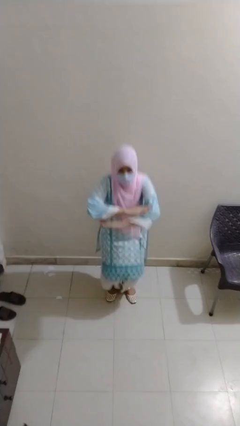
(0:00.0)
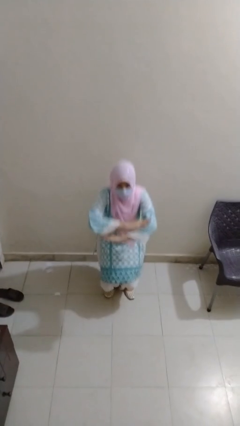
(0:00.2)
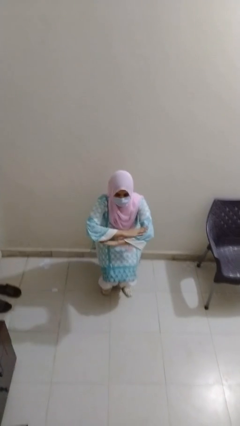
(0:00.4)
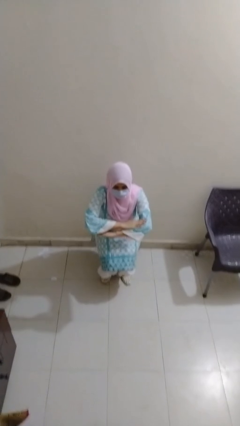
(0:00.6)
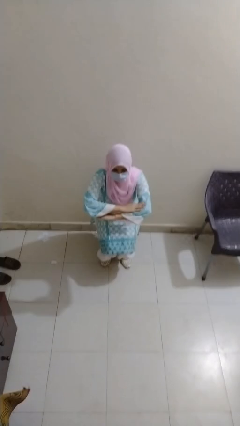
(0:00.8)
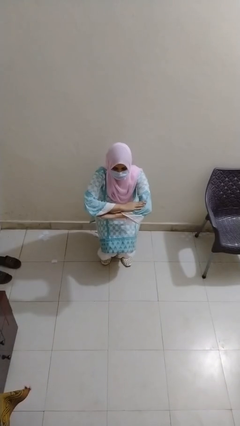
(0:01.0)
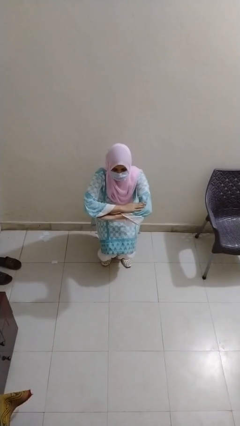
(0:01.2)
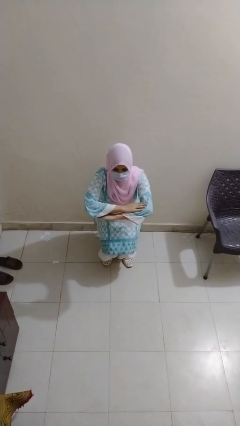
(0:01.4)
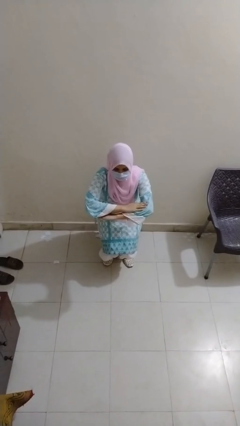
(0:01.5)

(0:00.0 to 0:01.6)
person squats

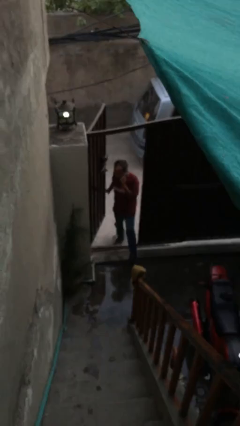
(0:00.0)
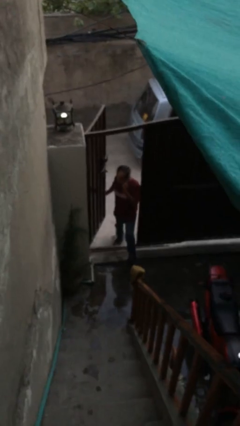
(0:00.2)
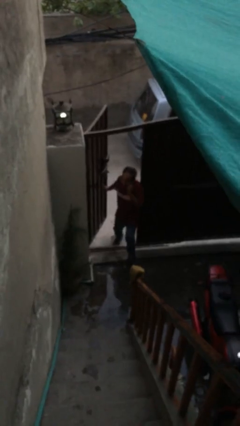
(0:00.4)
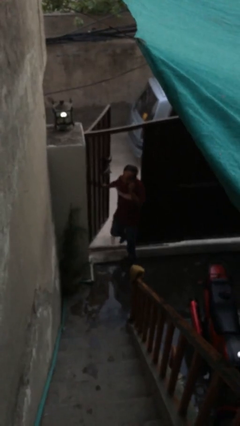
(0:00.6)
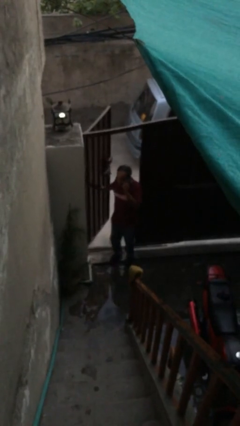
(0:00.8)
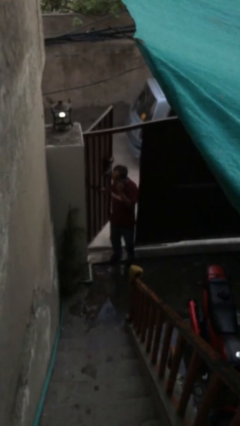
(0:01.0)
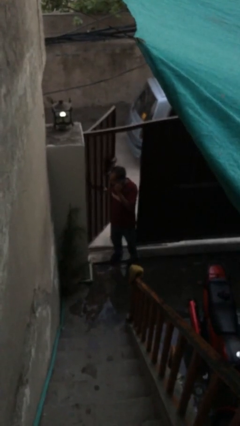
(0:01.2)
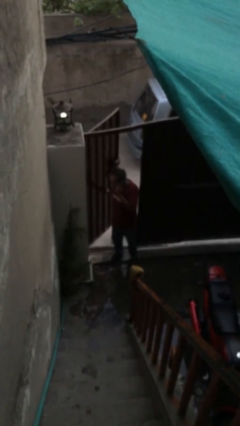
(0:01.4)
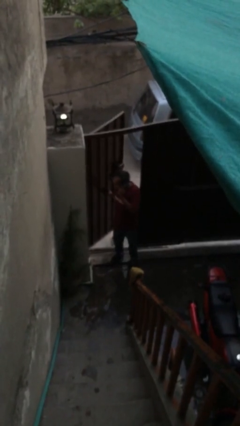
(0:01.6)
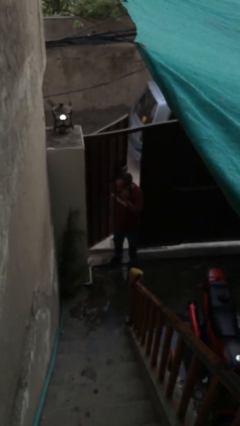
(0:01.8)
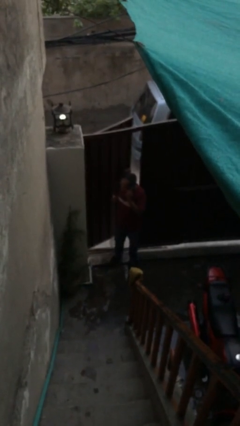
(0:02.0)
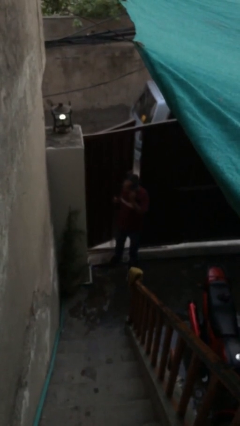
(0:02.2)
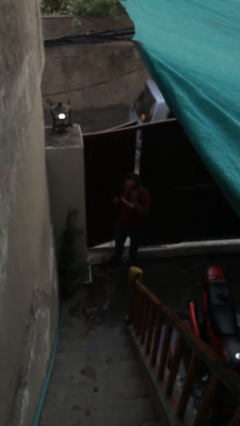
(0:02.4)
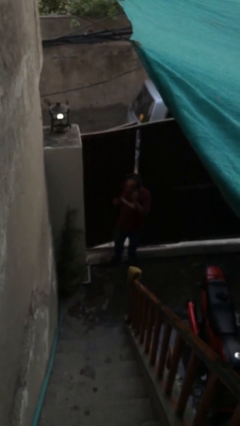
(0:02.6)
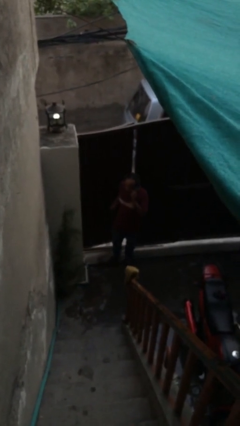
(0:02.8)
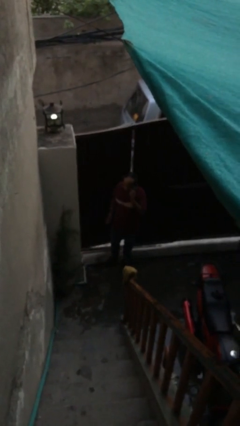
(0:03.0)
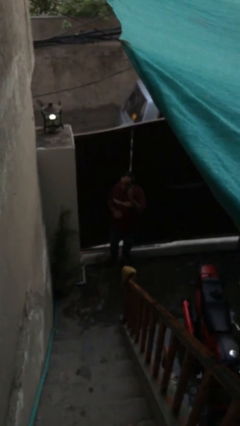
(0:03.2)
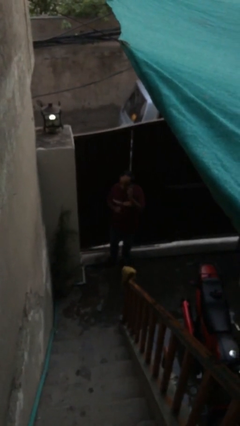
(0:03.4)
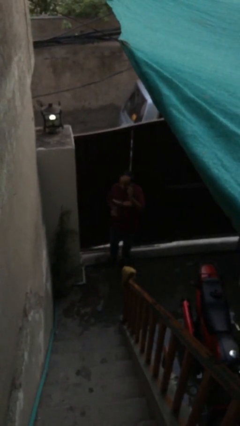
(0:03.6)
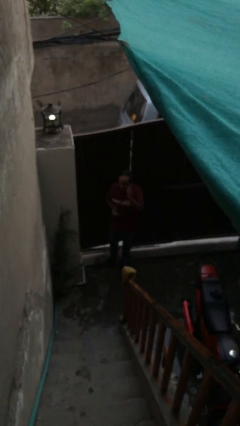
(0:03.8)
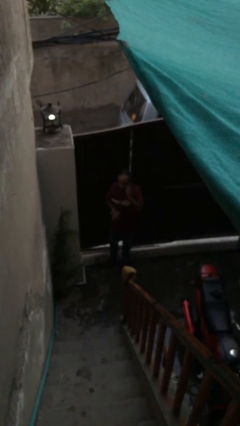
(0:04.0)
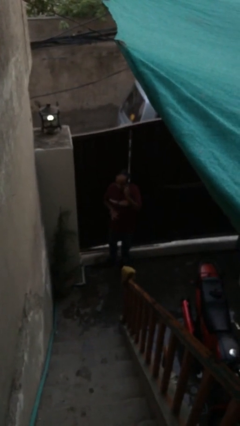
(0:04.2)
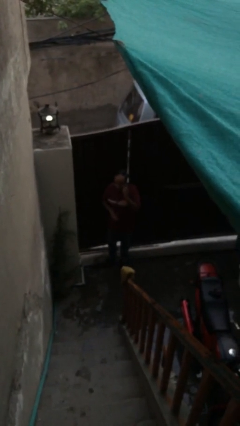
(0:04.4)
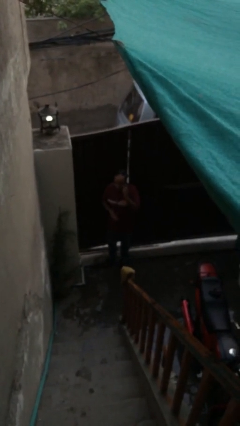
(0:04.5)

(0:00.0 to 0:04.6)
person closes facility door

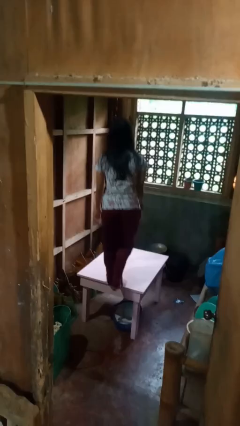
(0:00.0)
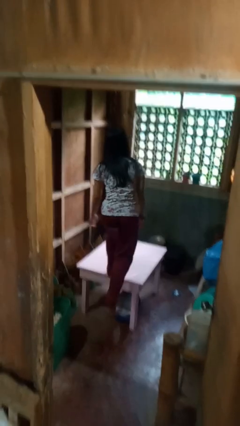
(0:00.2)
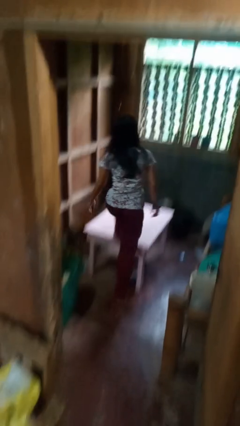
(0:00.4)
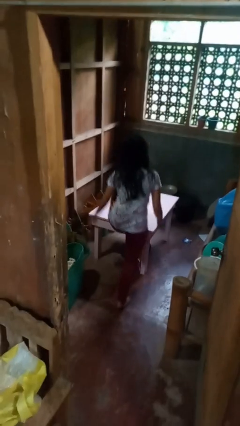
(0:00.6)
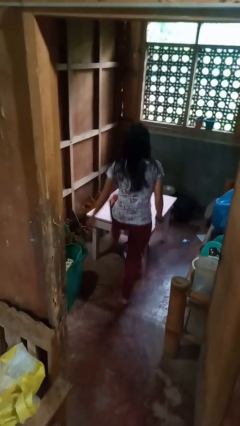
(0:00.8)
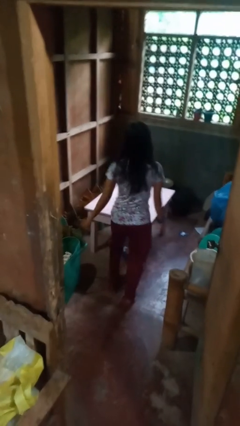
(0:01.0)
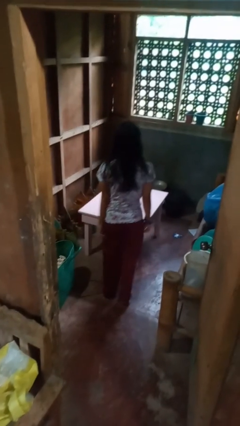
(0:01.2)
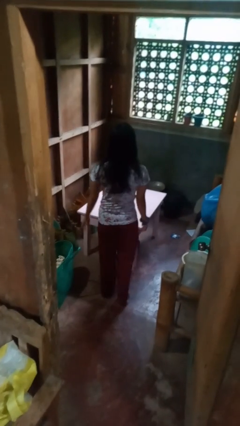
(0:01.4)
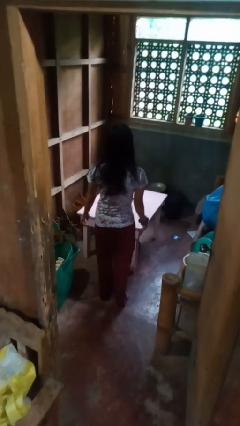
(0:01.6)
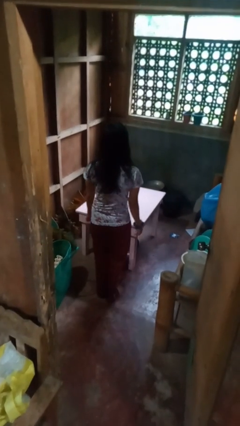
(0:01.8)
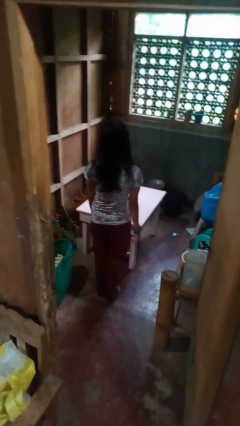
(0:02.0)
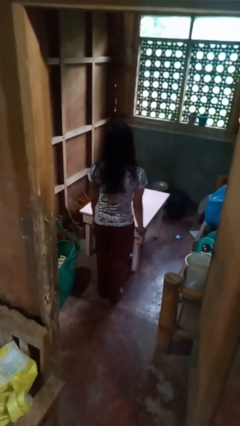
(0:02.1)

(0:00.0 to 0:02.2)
person climbs off table

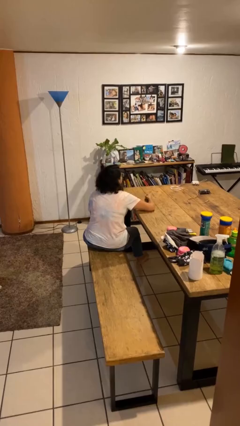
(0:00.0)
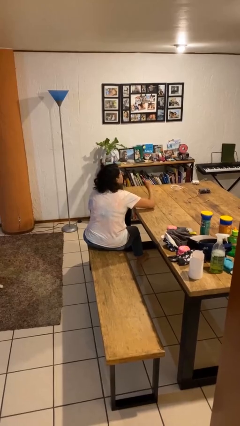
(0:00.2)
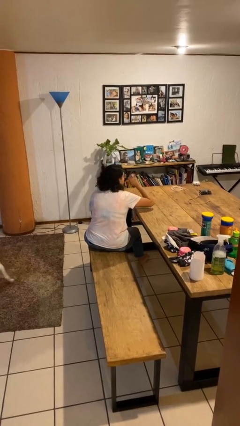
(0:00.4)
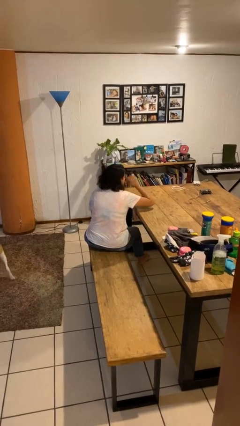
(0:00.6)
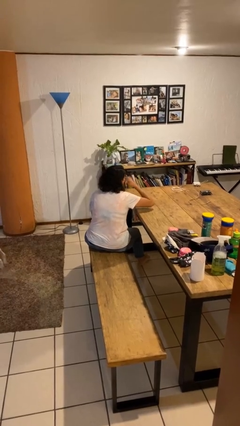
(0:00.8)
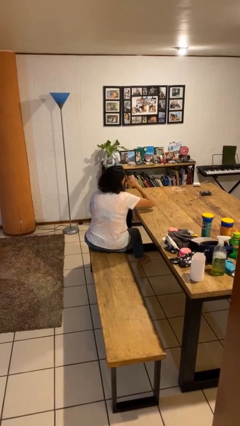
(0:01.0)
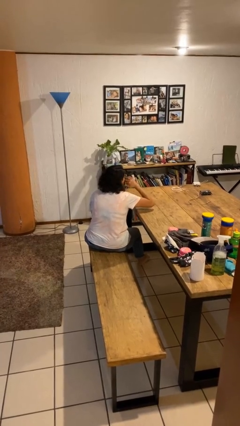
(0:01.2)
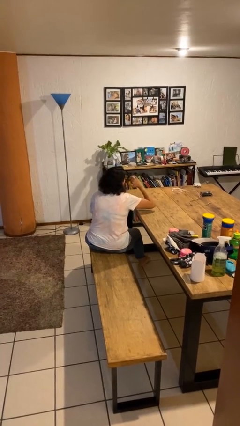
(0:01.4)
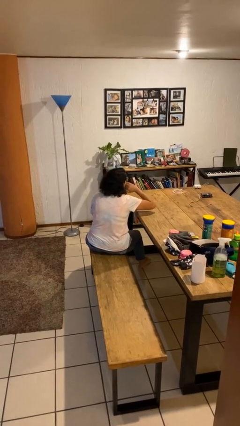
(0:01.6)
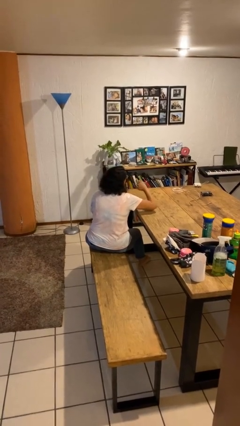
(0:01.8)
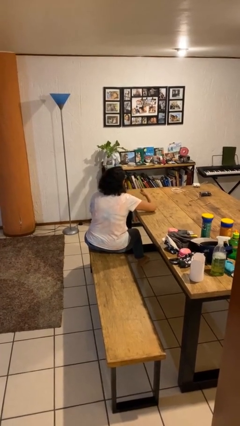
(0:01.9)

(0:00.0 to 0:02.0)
person licks fingers

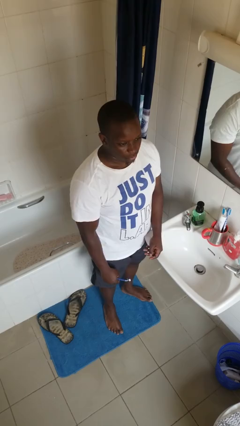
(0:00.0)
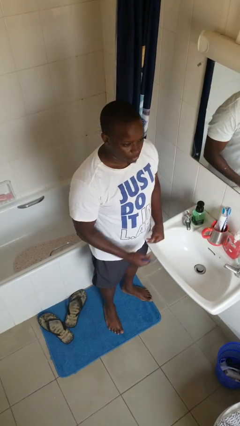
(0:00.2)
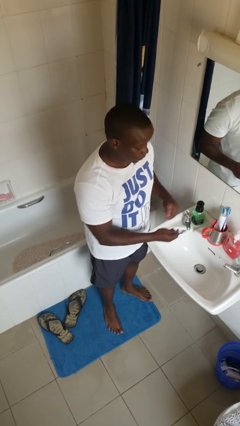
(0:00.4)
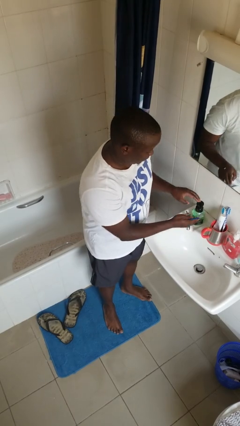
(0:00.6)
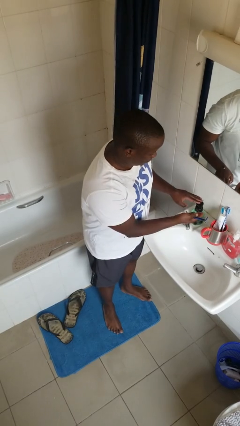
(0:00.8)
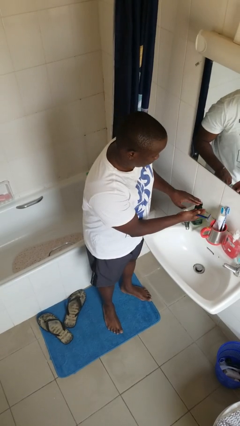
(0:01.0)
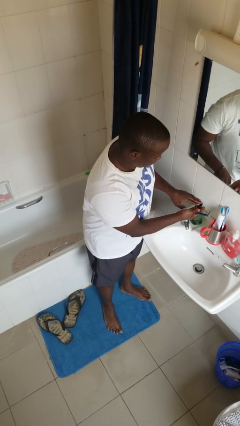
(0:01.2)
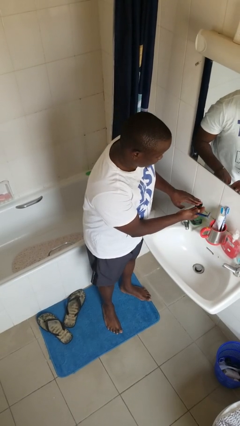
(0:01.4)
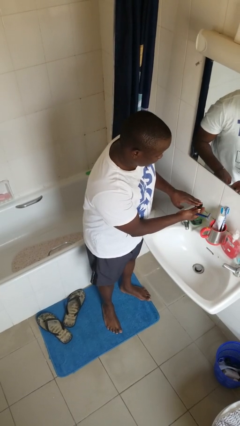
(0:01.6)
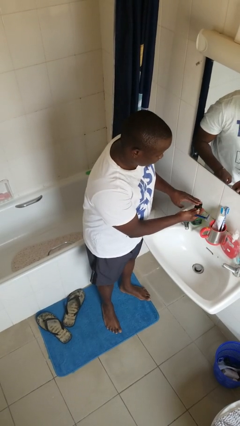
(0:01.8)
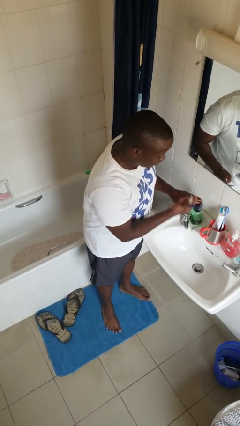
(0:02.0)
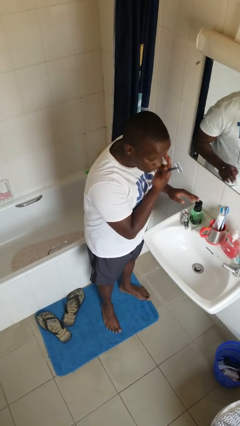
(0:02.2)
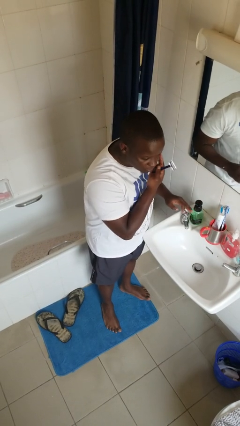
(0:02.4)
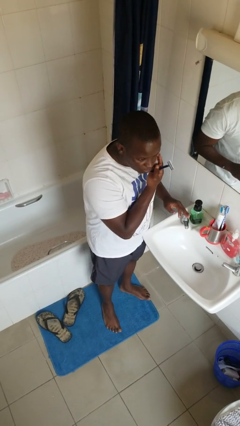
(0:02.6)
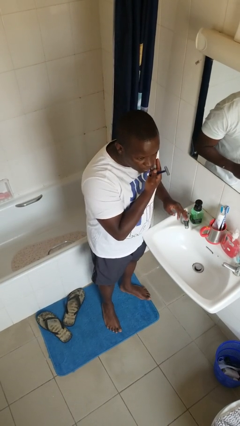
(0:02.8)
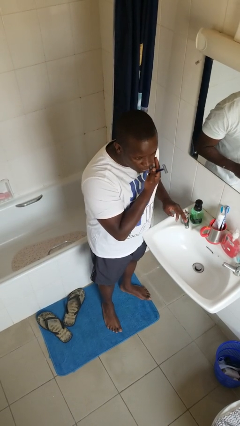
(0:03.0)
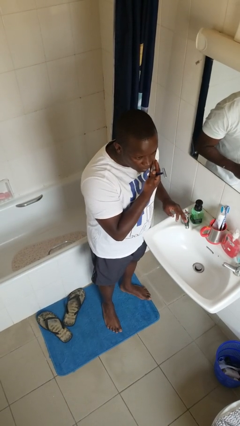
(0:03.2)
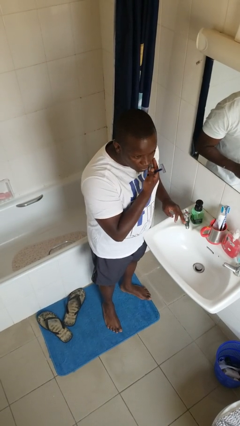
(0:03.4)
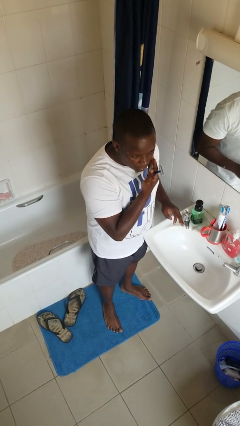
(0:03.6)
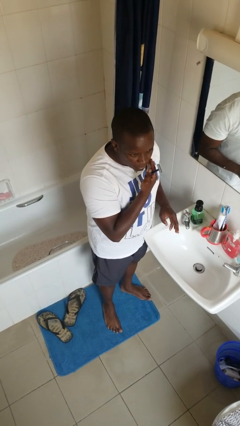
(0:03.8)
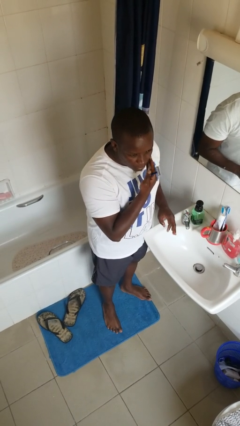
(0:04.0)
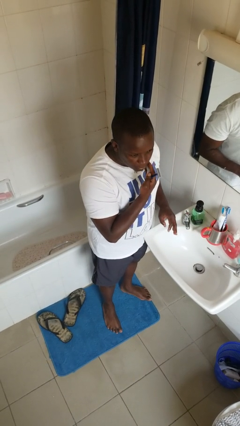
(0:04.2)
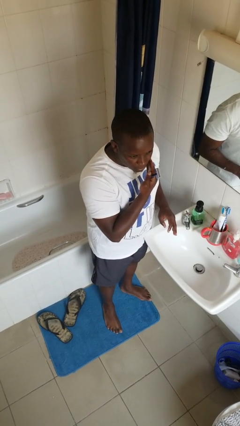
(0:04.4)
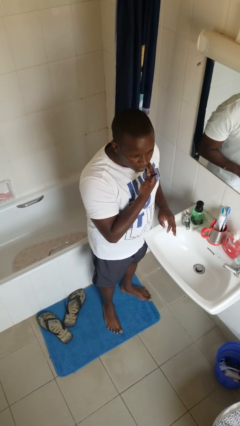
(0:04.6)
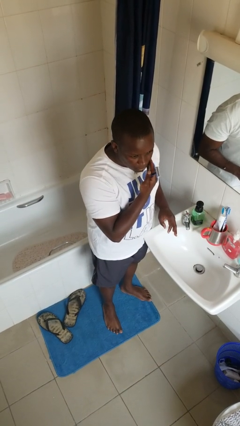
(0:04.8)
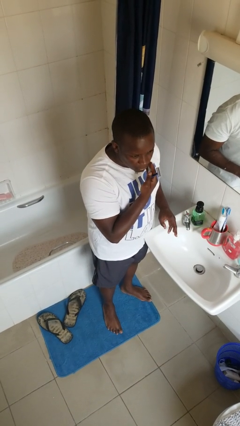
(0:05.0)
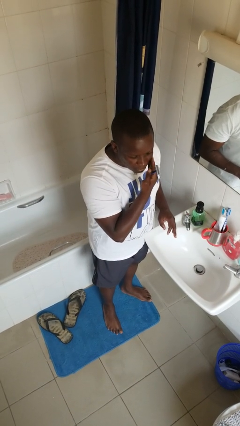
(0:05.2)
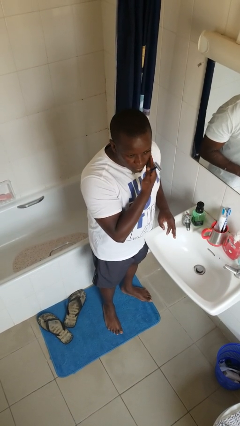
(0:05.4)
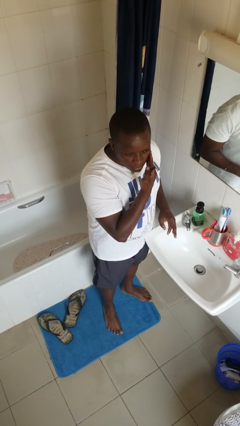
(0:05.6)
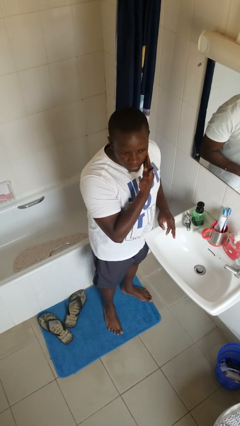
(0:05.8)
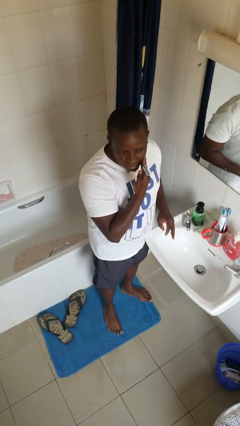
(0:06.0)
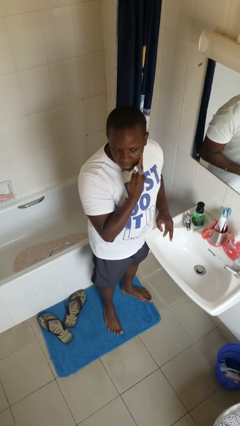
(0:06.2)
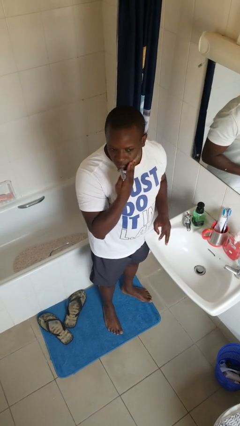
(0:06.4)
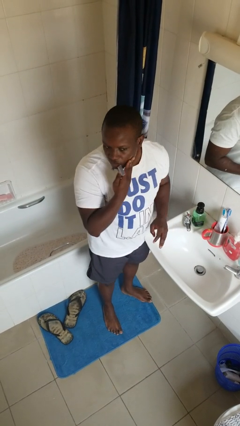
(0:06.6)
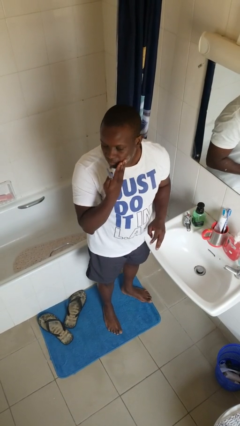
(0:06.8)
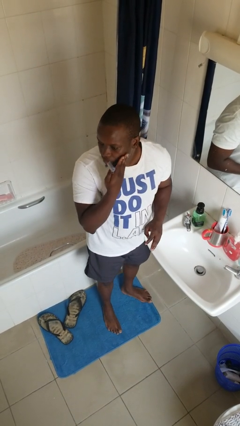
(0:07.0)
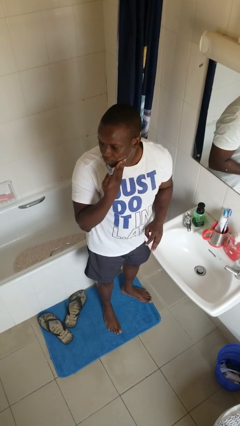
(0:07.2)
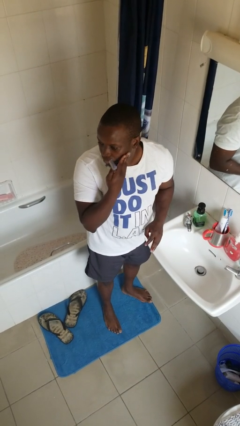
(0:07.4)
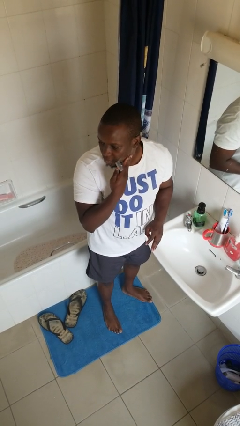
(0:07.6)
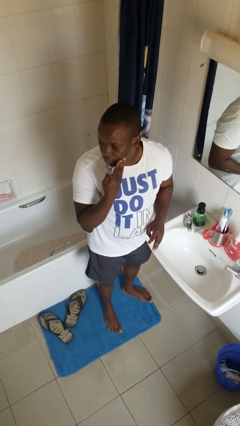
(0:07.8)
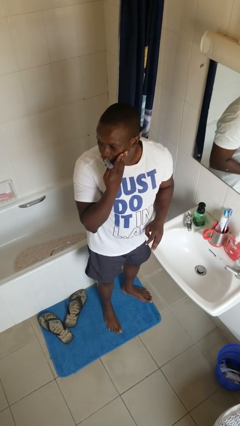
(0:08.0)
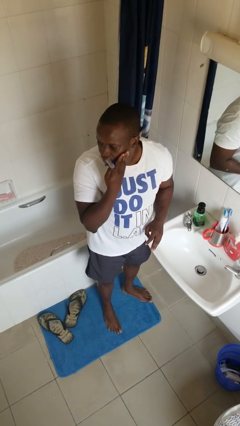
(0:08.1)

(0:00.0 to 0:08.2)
person applies shaving cream
